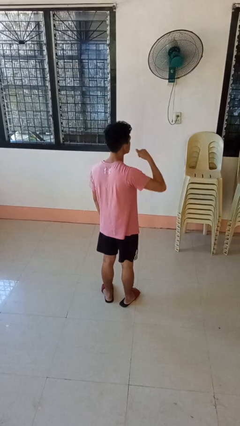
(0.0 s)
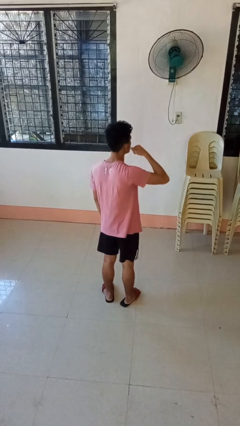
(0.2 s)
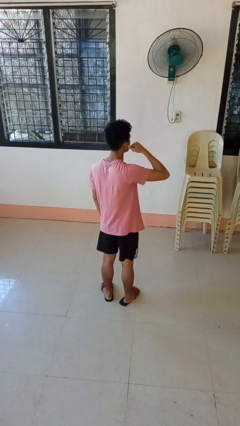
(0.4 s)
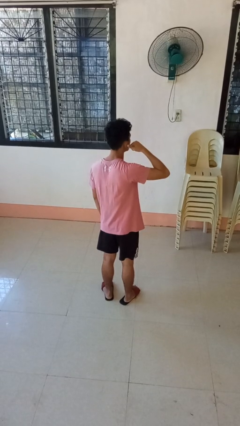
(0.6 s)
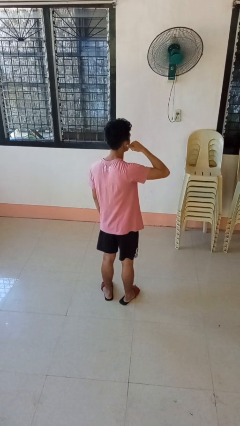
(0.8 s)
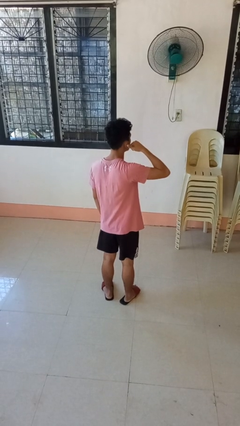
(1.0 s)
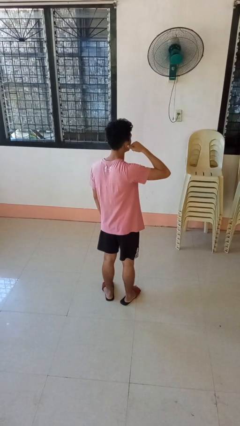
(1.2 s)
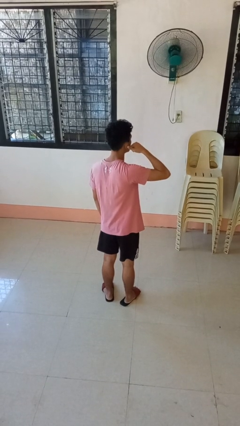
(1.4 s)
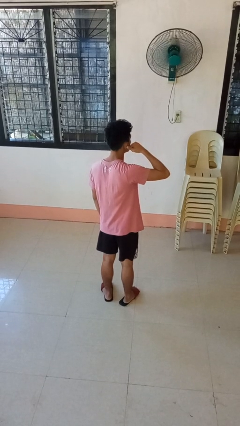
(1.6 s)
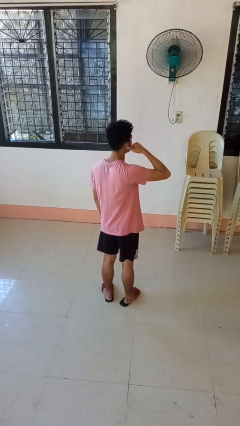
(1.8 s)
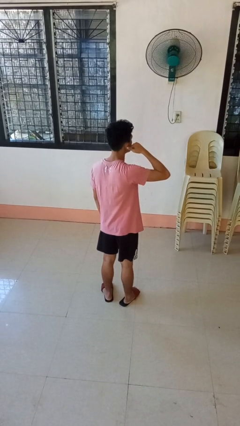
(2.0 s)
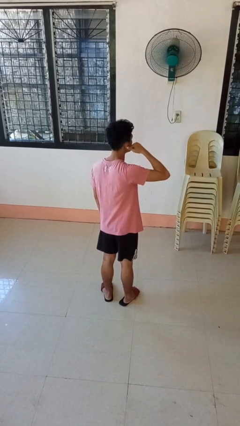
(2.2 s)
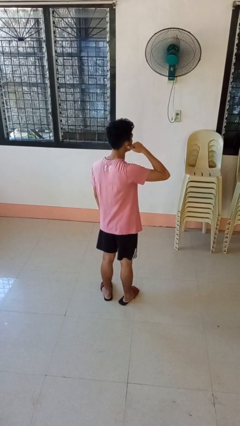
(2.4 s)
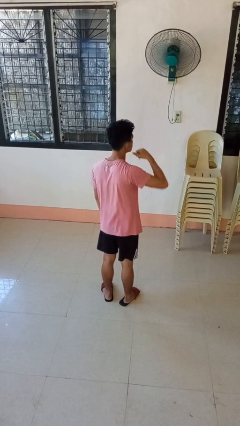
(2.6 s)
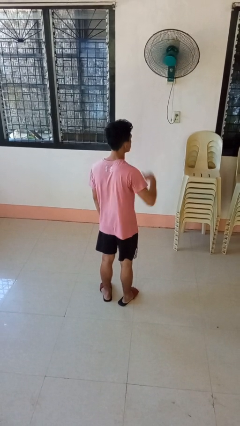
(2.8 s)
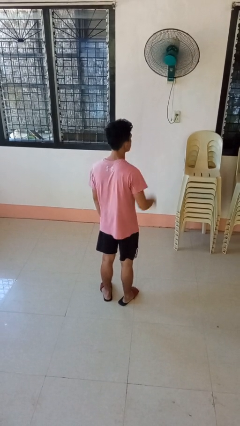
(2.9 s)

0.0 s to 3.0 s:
person gestures call me

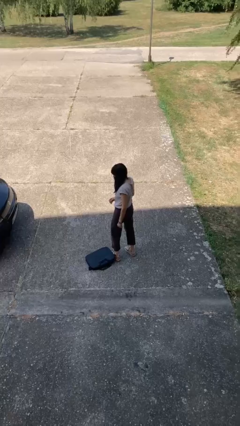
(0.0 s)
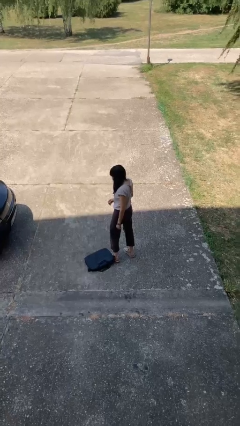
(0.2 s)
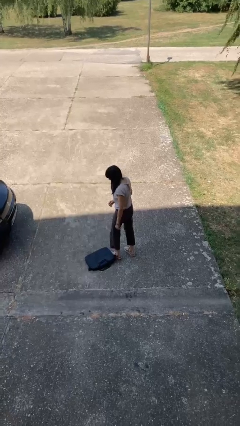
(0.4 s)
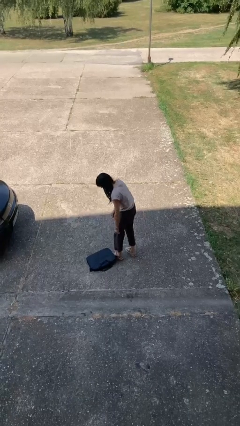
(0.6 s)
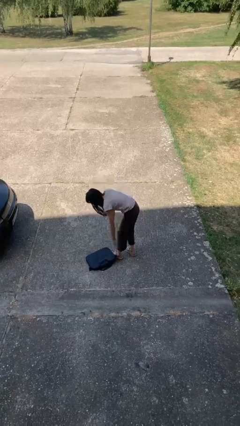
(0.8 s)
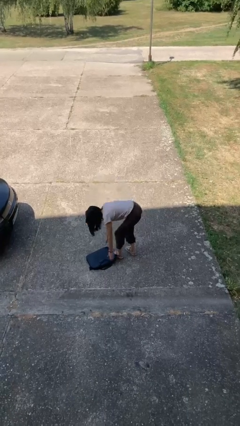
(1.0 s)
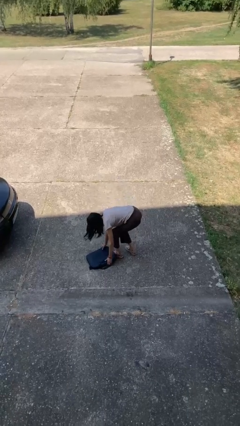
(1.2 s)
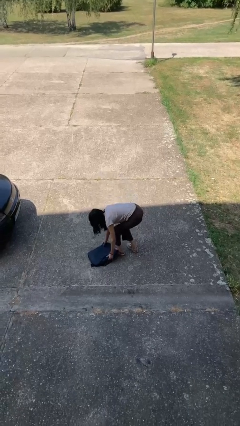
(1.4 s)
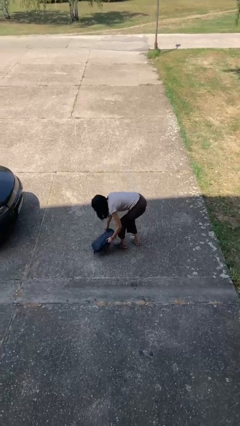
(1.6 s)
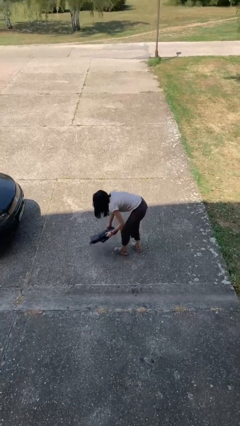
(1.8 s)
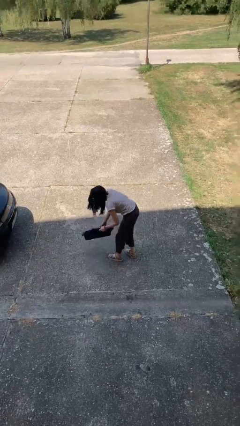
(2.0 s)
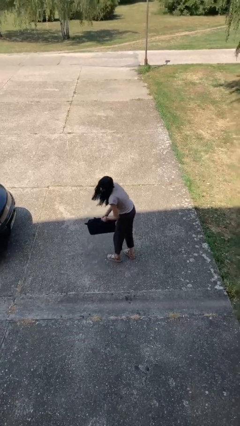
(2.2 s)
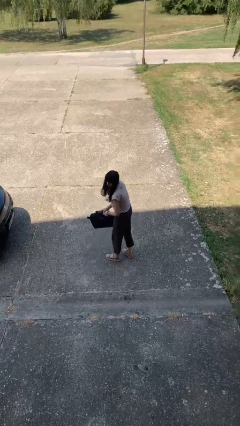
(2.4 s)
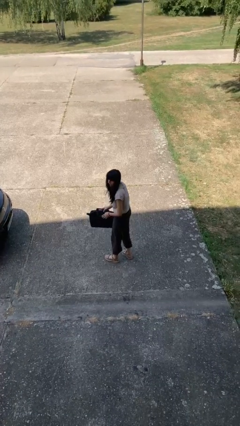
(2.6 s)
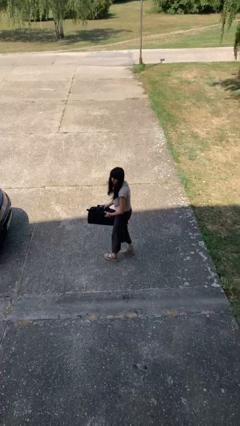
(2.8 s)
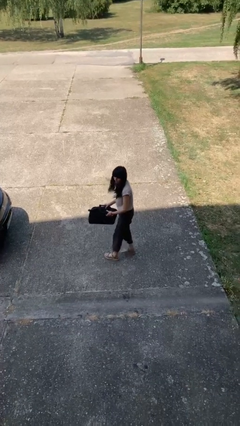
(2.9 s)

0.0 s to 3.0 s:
person picks up object from floor

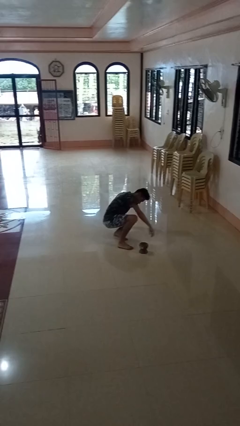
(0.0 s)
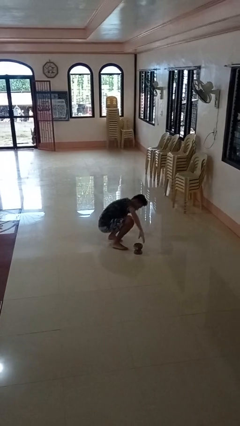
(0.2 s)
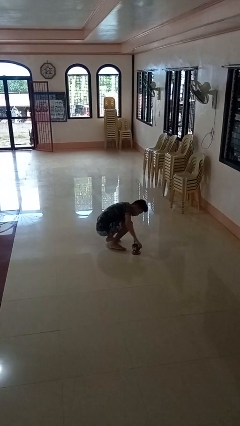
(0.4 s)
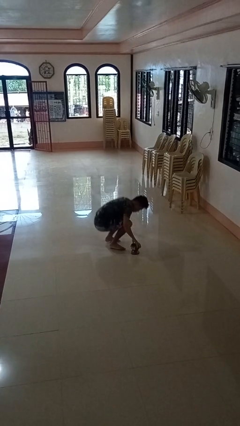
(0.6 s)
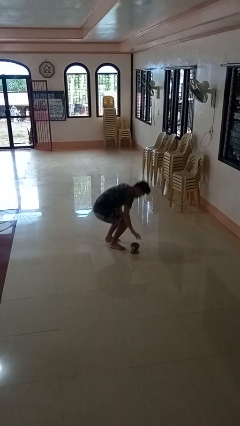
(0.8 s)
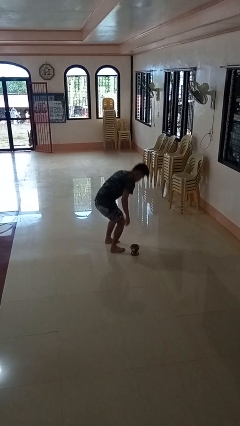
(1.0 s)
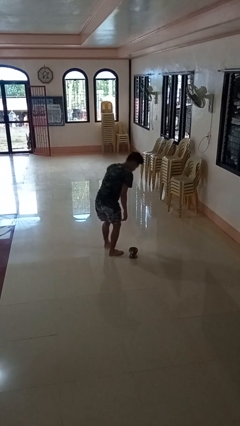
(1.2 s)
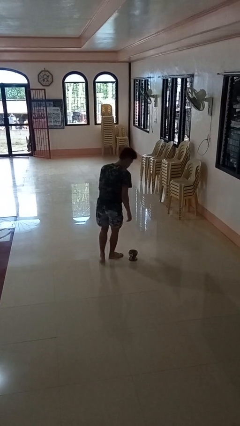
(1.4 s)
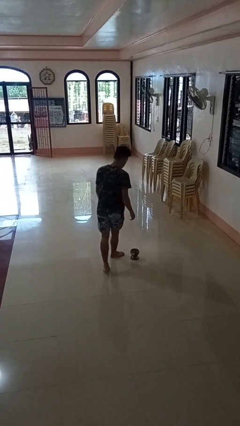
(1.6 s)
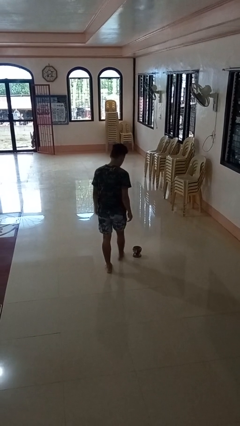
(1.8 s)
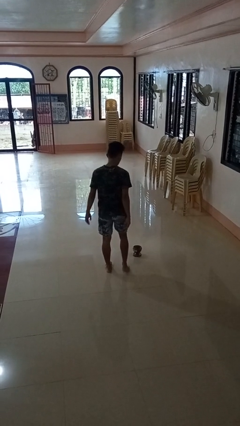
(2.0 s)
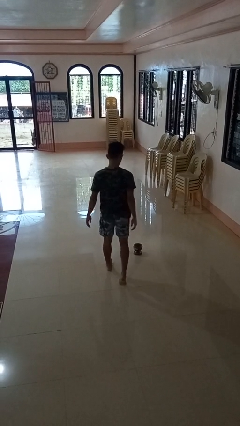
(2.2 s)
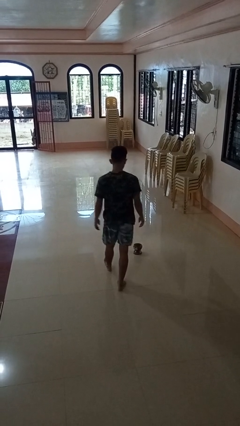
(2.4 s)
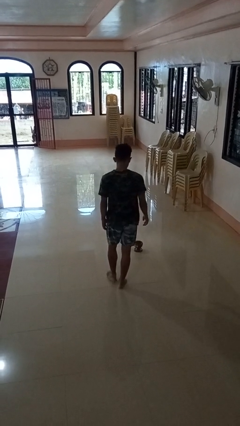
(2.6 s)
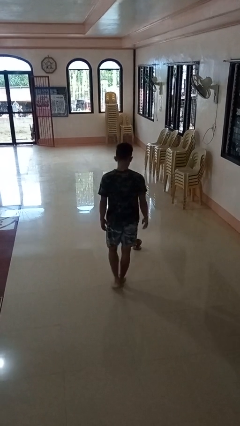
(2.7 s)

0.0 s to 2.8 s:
person stands up from floor

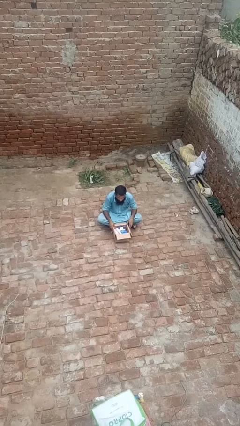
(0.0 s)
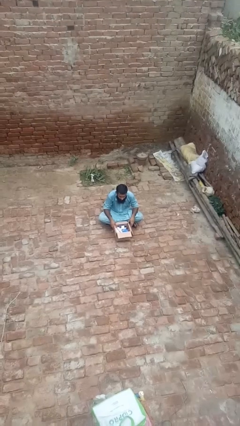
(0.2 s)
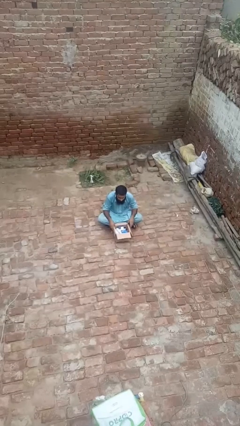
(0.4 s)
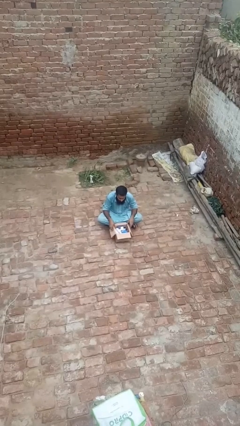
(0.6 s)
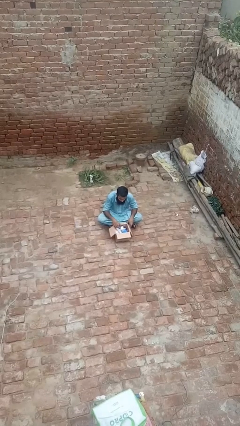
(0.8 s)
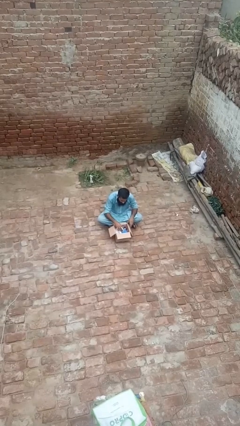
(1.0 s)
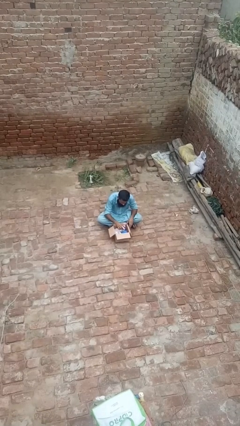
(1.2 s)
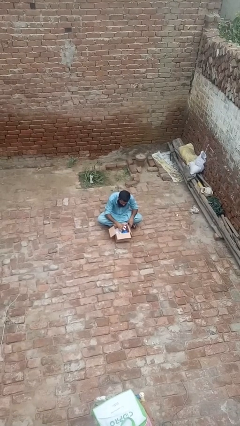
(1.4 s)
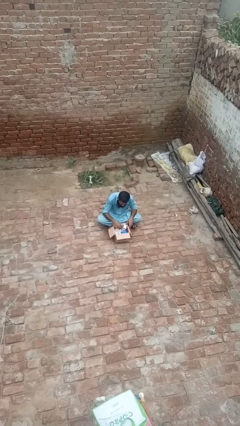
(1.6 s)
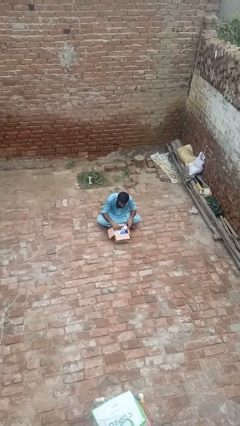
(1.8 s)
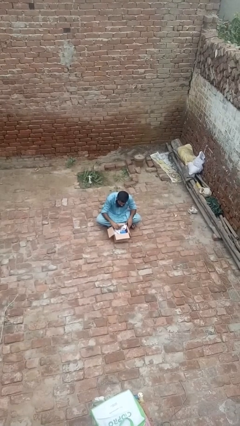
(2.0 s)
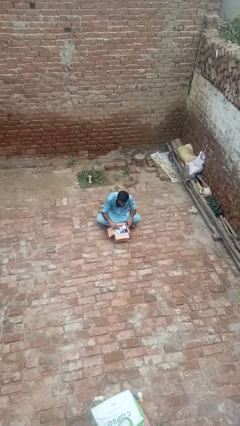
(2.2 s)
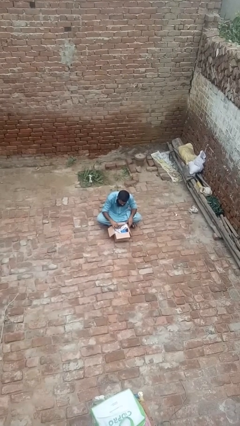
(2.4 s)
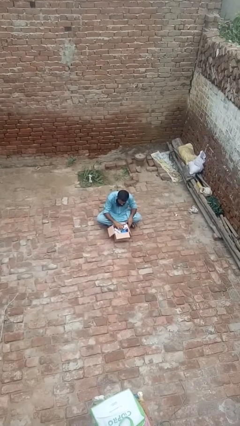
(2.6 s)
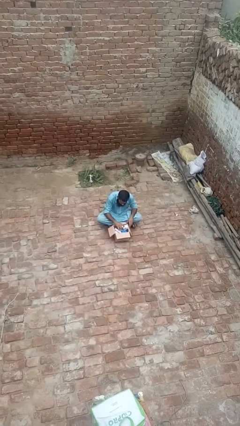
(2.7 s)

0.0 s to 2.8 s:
person searches in box

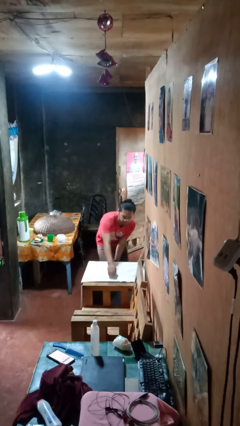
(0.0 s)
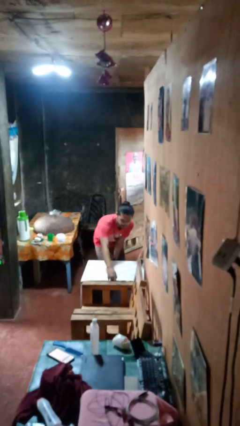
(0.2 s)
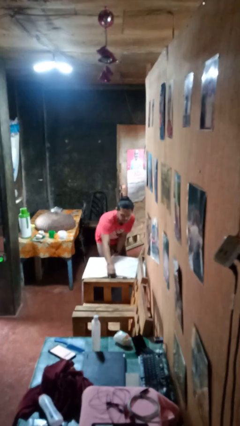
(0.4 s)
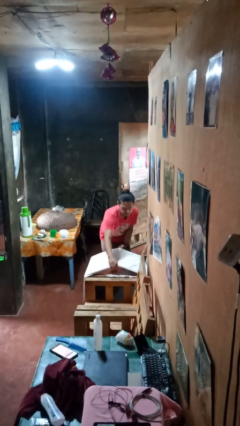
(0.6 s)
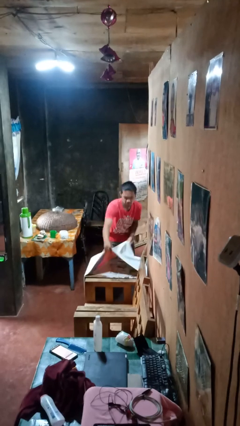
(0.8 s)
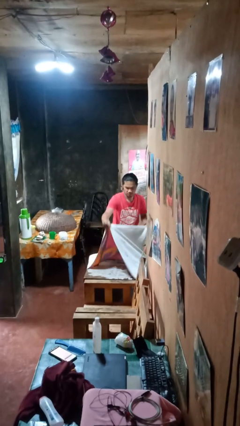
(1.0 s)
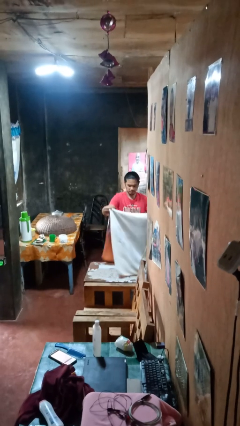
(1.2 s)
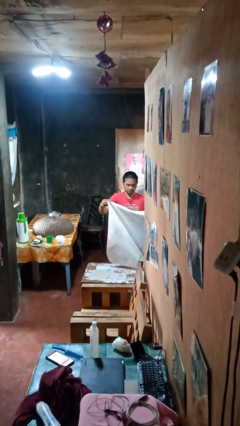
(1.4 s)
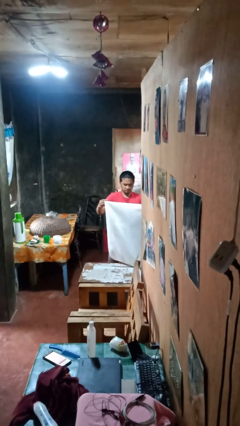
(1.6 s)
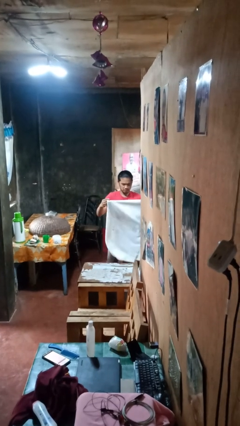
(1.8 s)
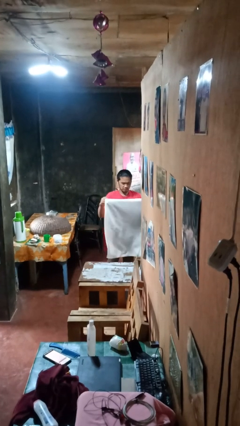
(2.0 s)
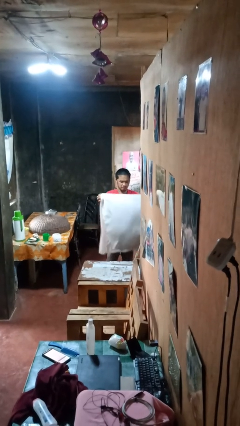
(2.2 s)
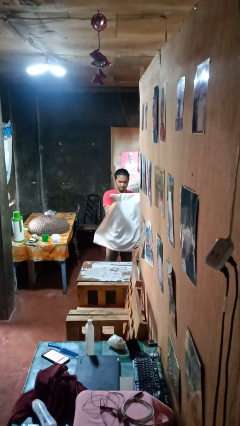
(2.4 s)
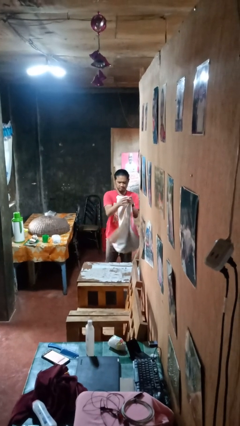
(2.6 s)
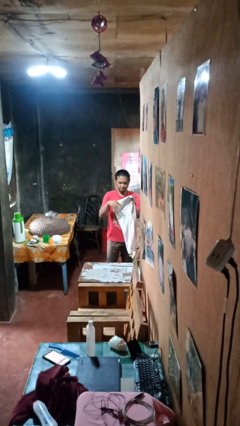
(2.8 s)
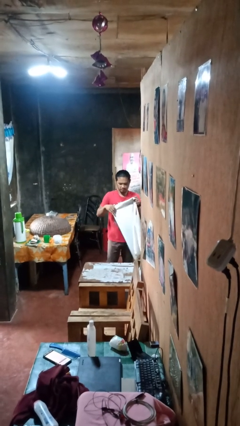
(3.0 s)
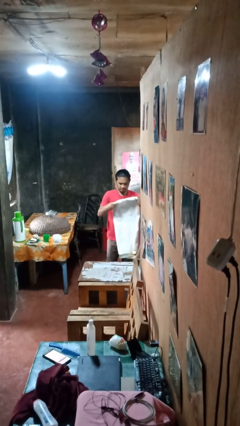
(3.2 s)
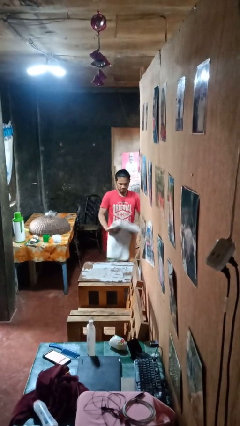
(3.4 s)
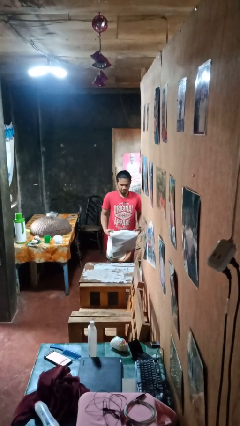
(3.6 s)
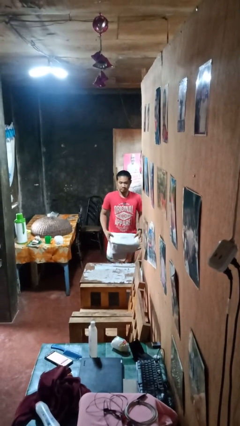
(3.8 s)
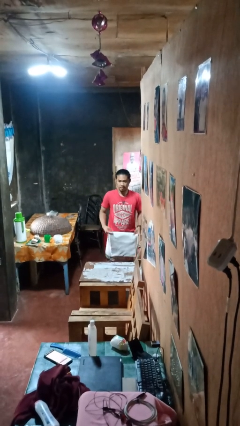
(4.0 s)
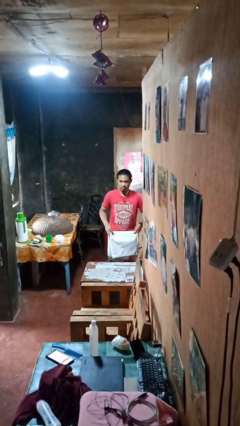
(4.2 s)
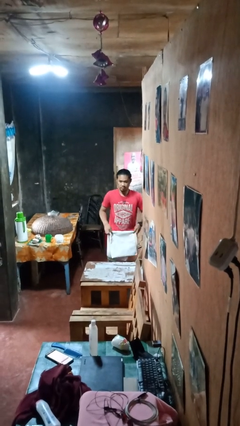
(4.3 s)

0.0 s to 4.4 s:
person folds tablecloth

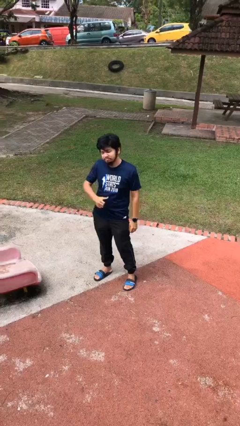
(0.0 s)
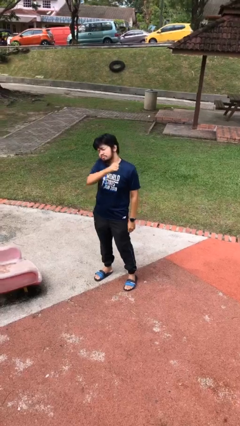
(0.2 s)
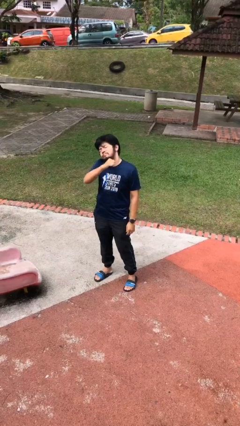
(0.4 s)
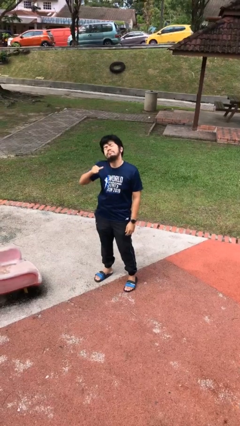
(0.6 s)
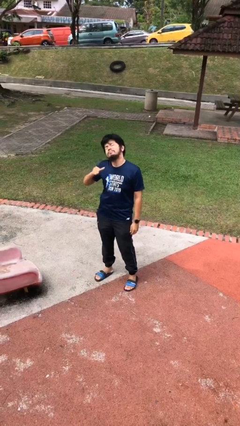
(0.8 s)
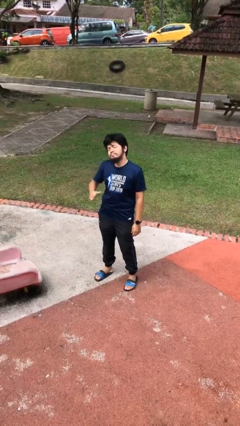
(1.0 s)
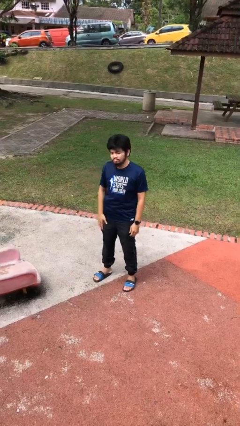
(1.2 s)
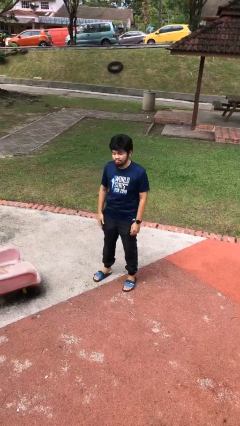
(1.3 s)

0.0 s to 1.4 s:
person gestures cut
